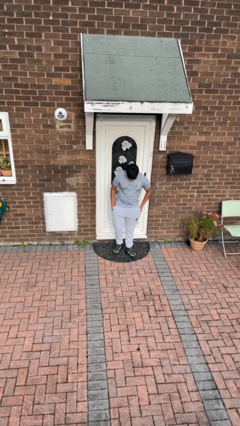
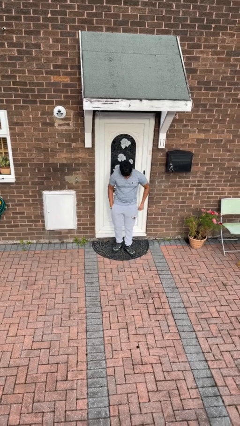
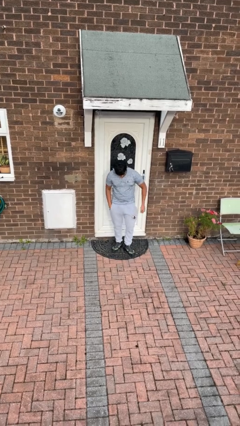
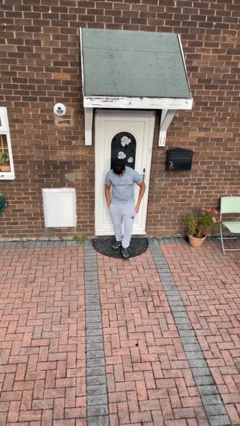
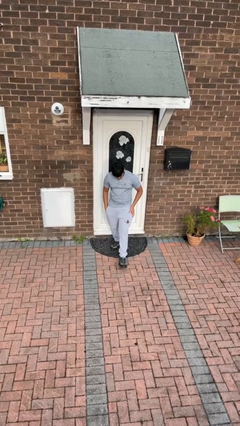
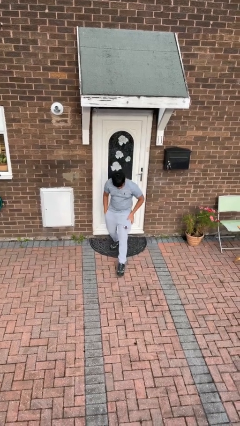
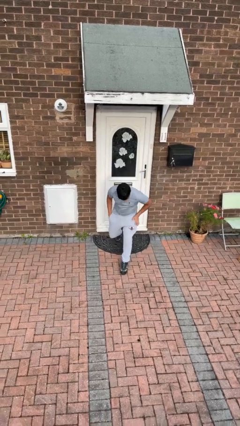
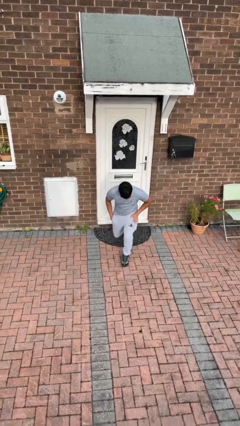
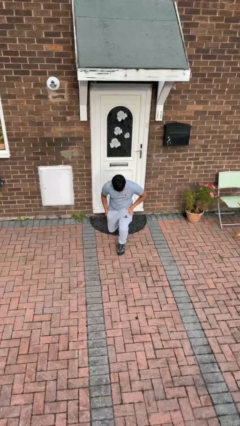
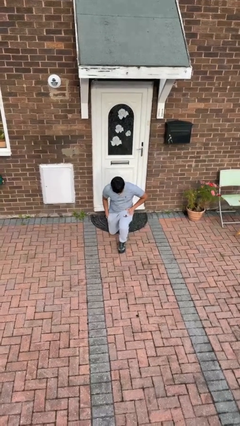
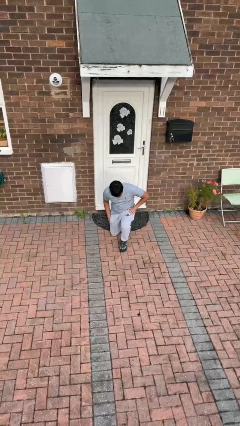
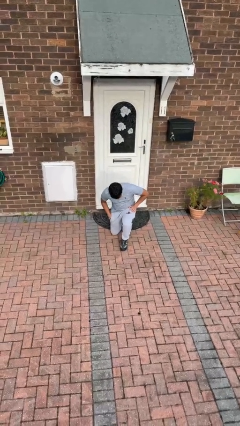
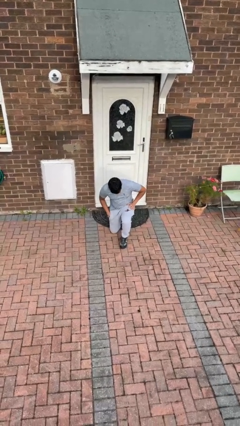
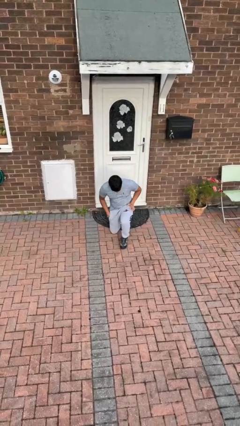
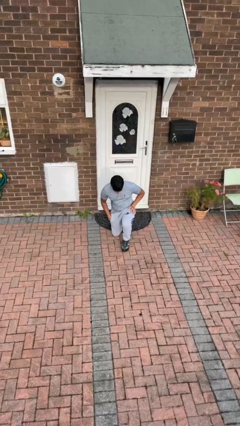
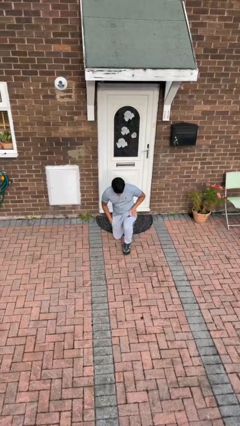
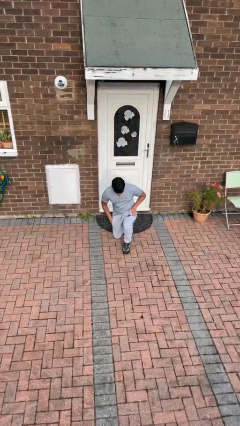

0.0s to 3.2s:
person kneels

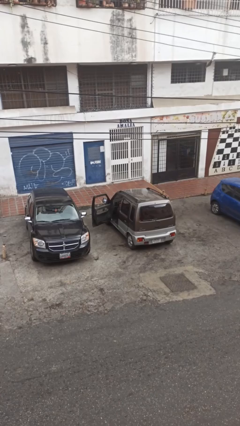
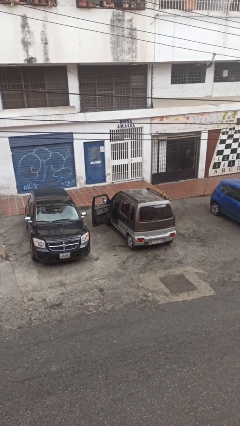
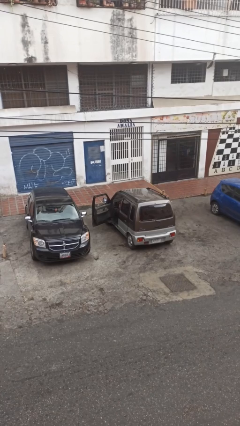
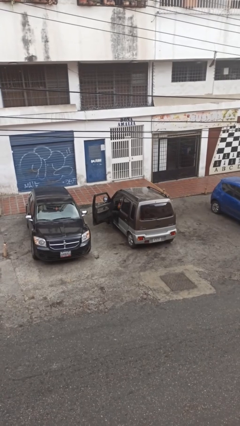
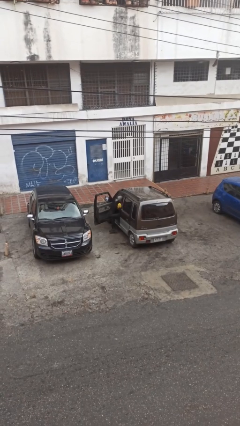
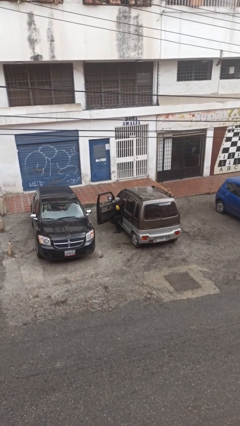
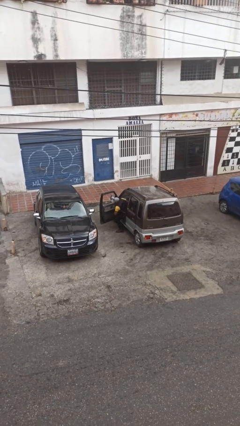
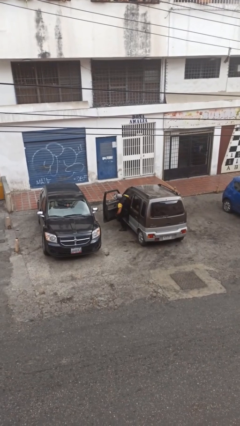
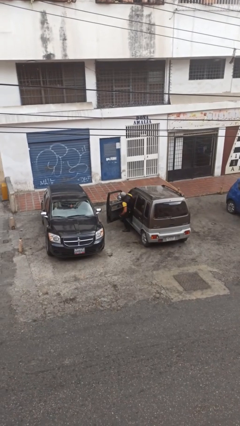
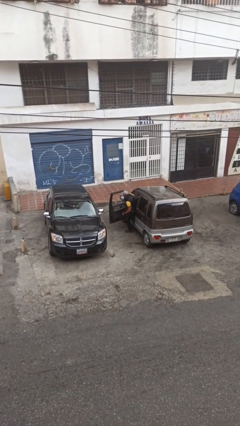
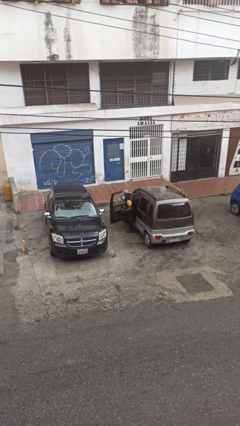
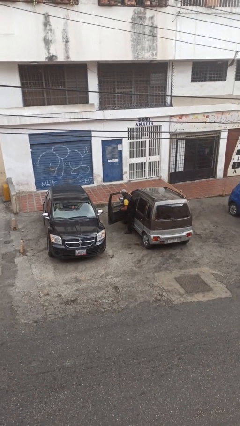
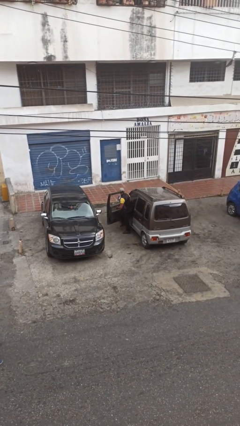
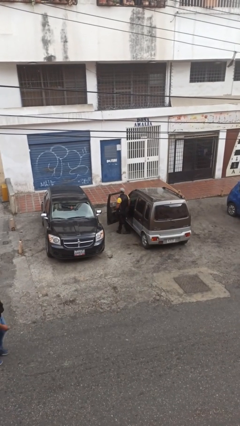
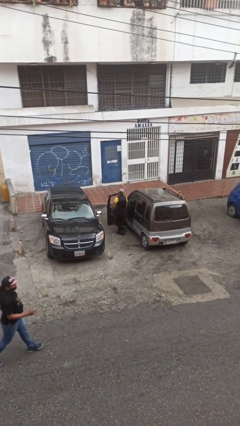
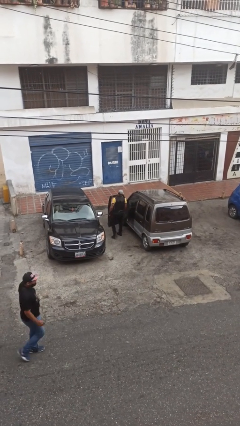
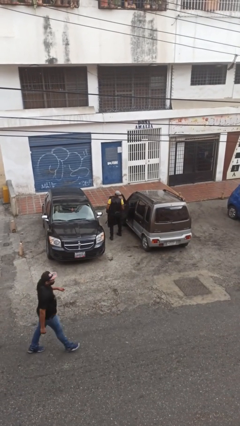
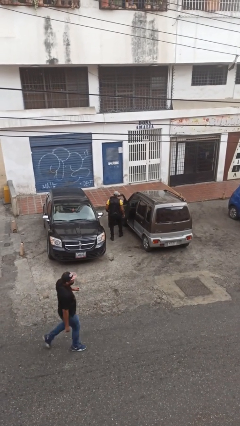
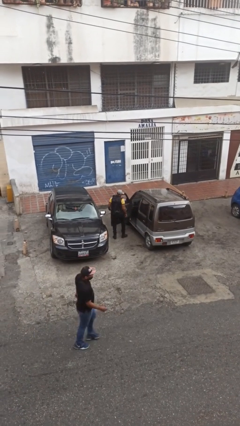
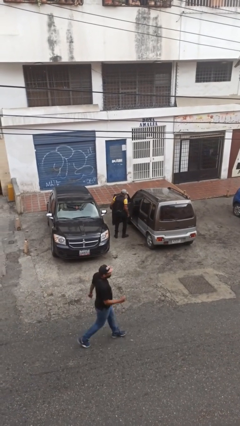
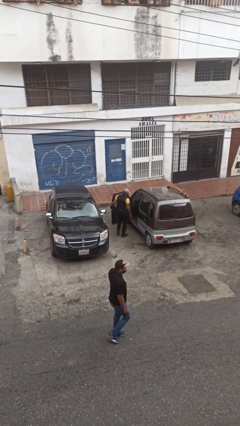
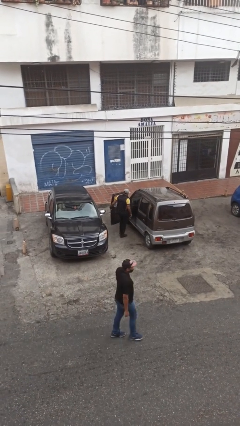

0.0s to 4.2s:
person exits car

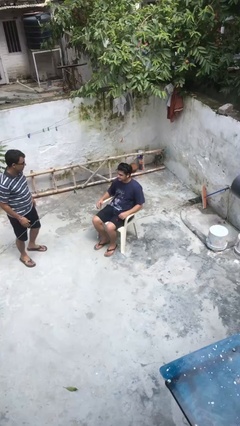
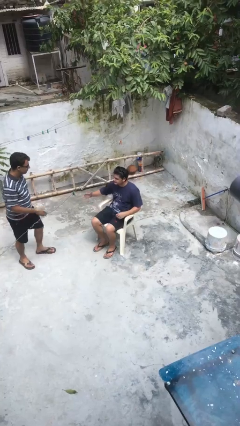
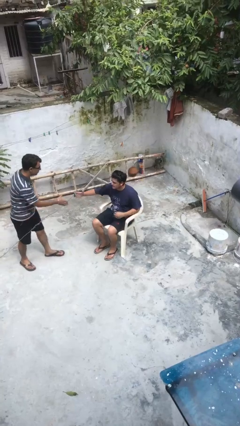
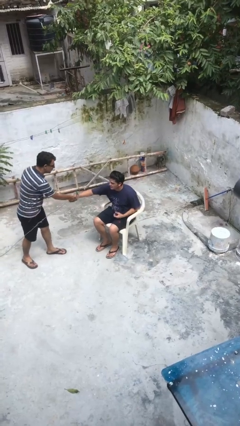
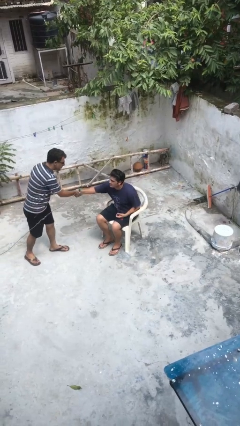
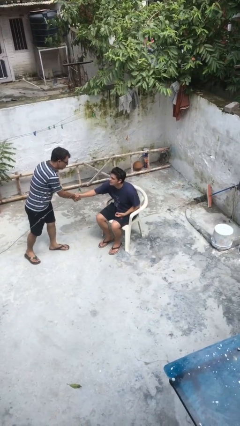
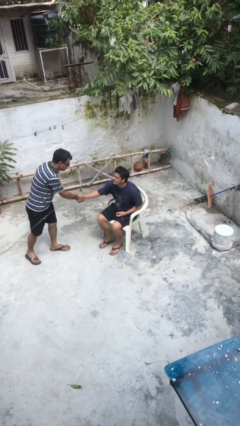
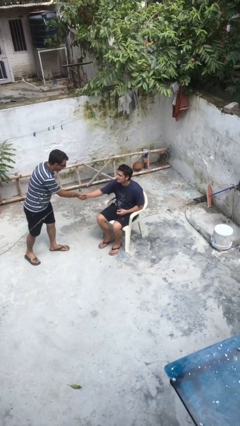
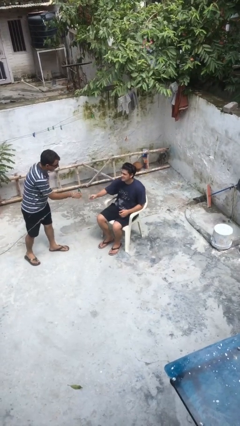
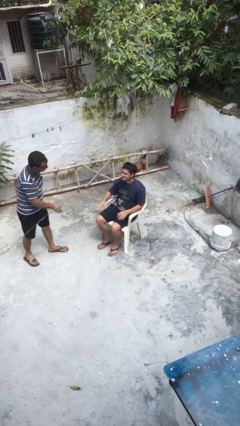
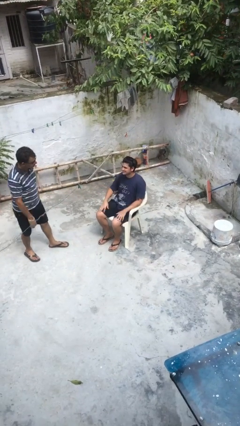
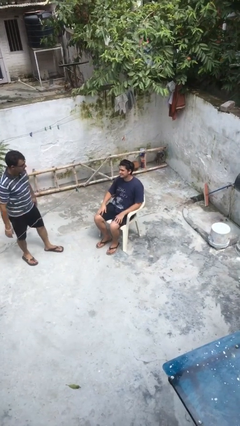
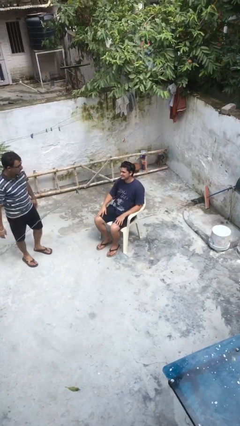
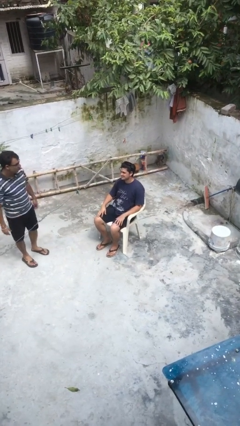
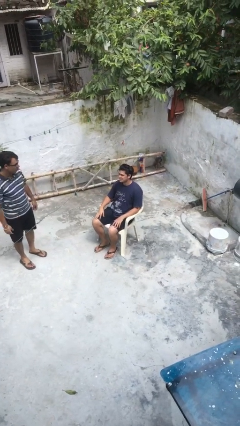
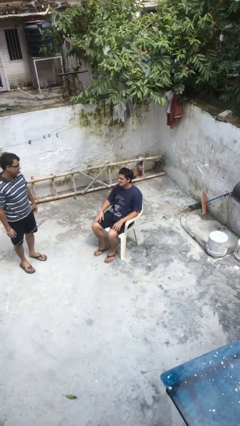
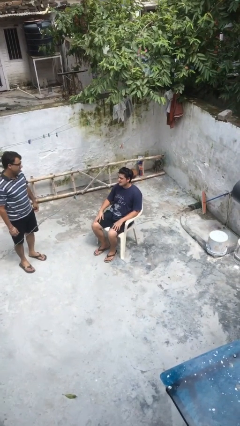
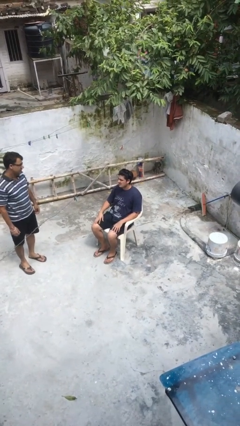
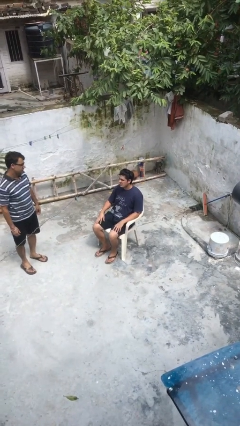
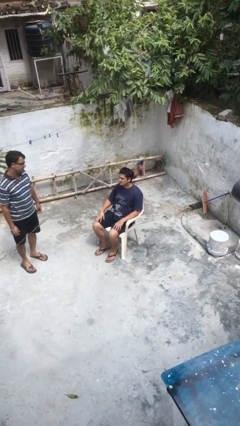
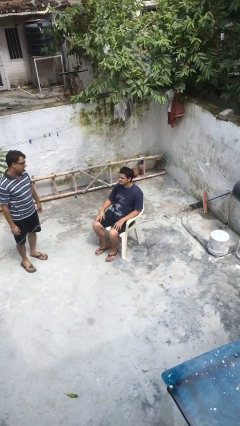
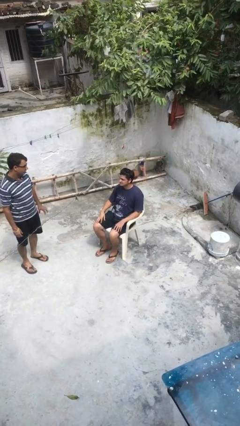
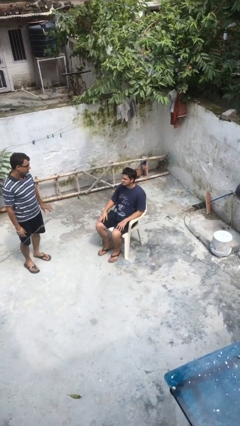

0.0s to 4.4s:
person shakes hand

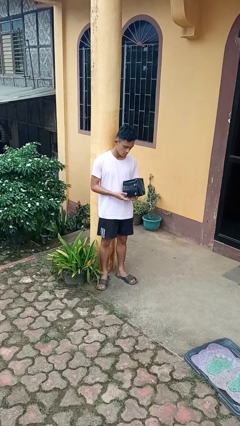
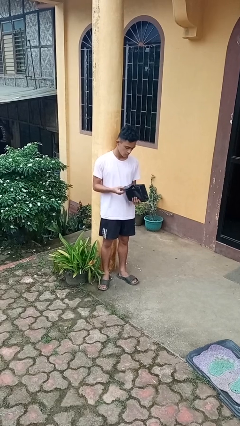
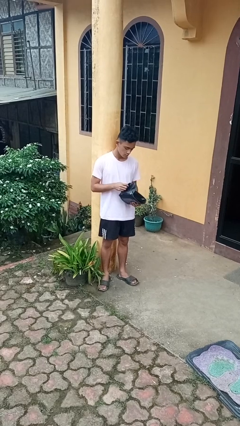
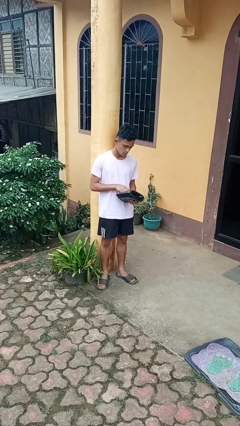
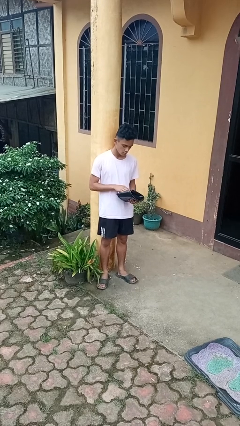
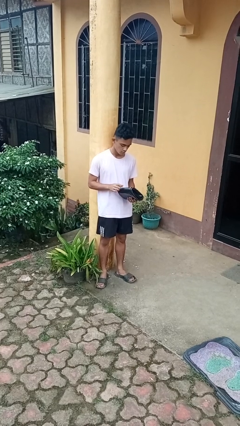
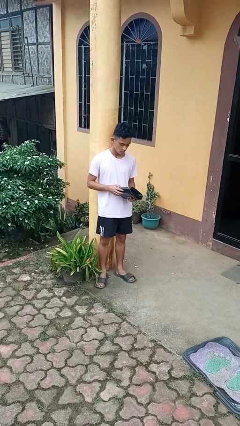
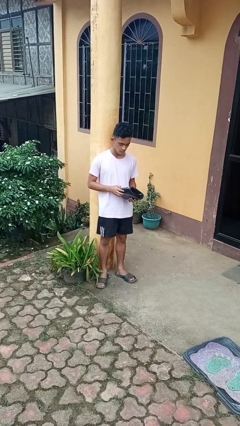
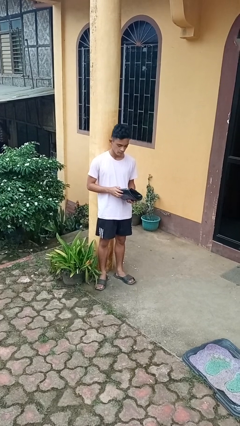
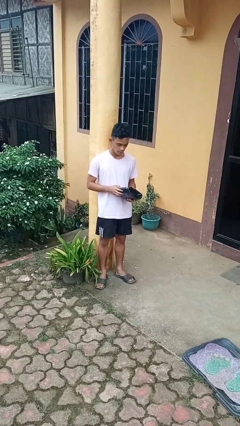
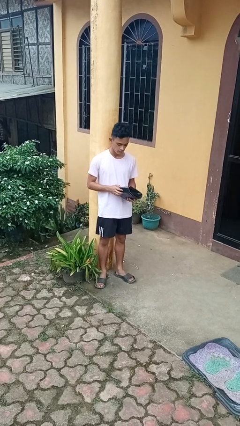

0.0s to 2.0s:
person puts object into purse

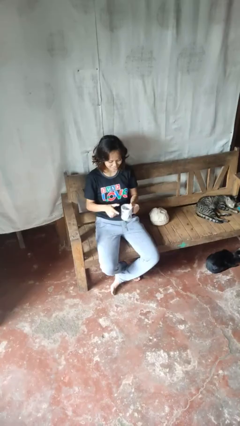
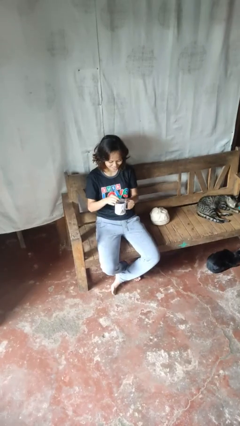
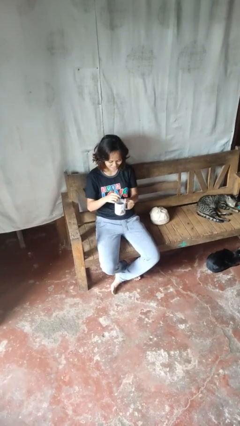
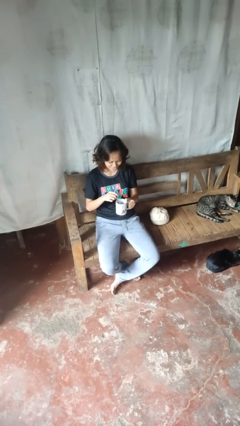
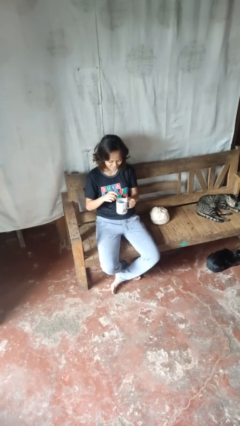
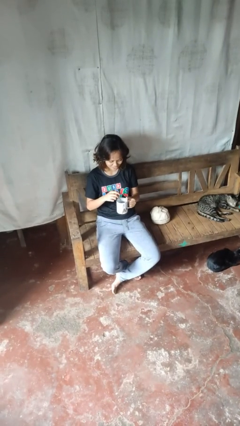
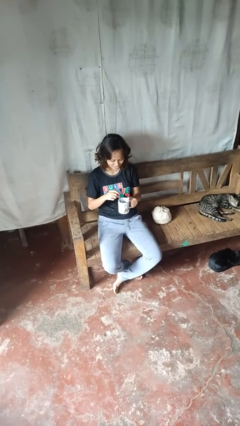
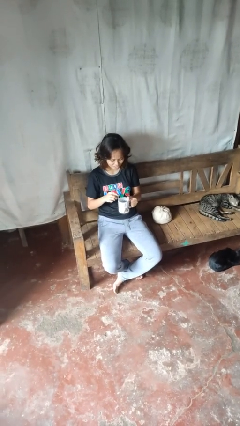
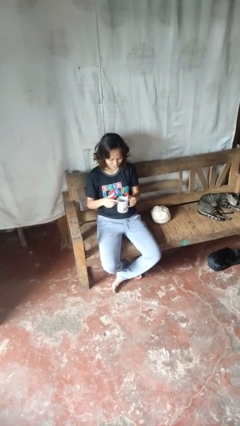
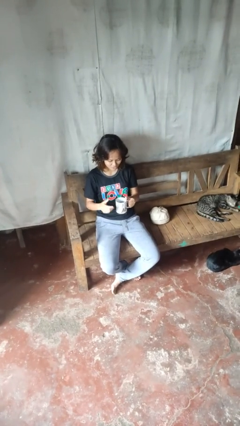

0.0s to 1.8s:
person stirs mug

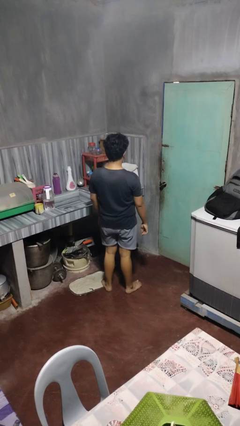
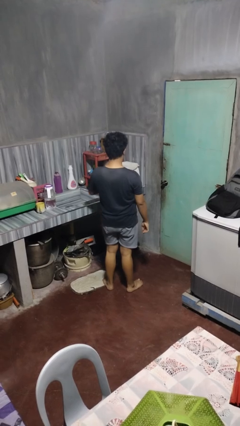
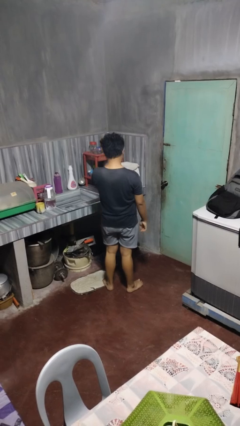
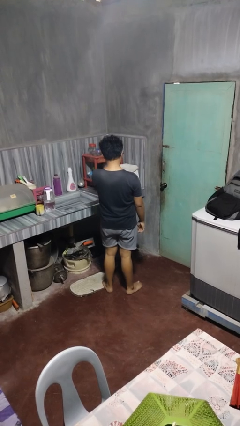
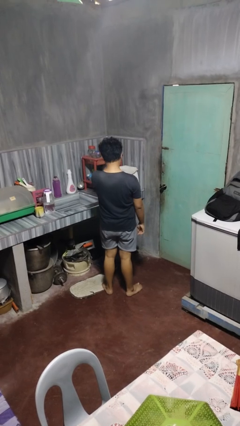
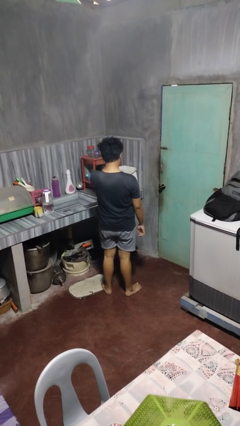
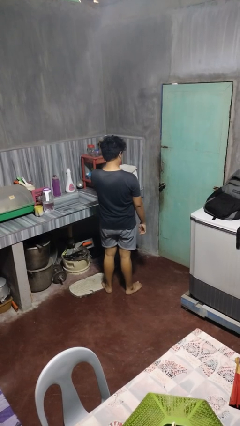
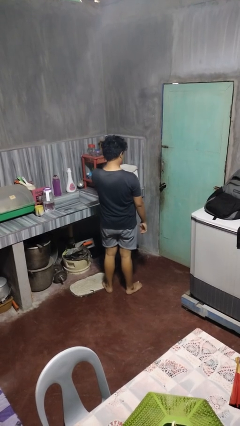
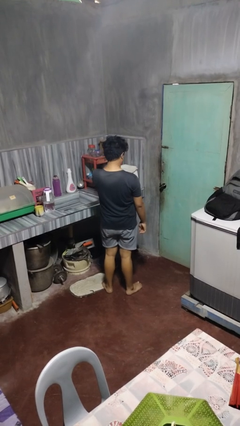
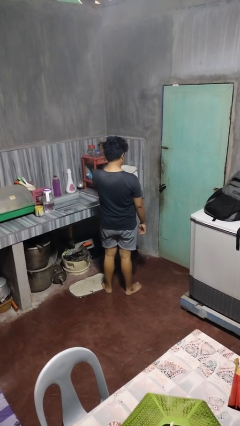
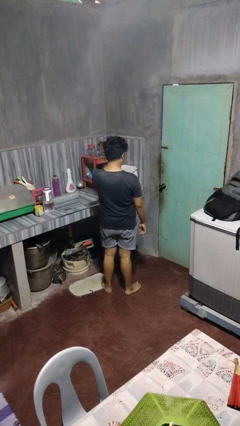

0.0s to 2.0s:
person rubs eyes
